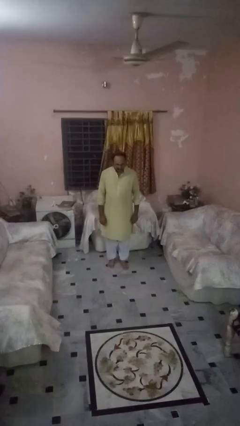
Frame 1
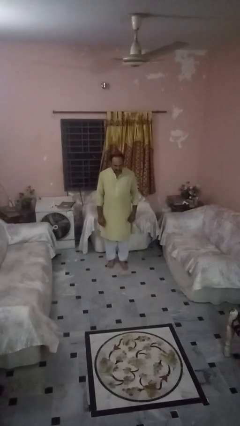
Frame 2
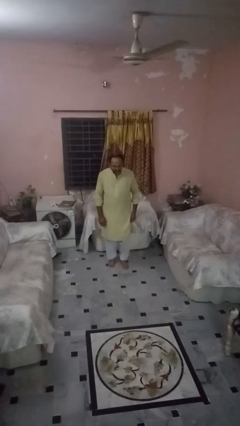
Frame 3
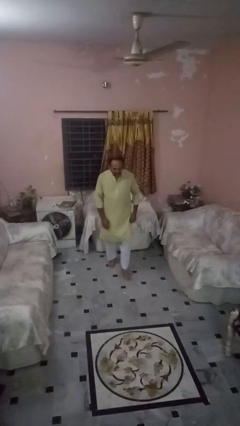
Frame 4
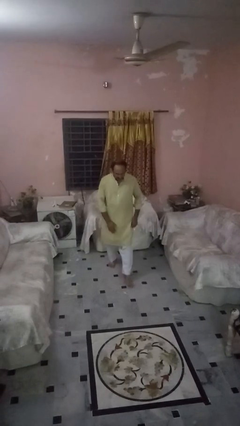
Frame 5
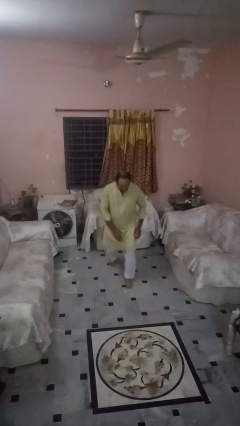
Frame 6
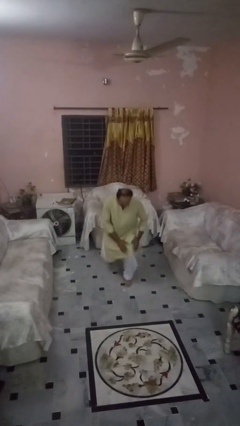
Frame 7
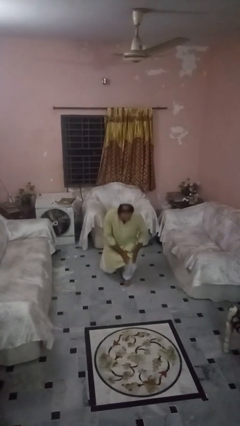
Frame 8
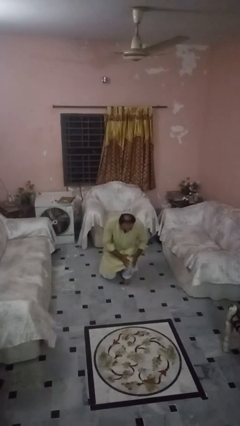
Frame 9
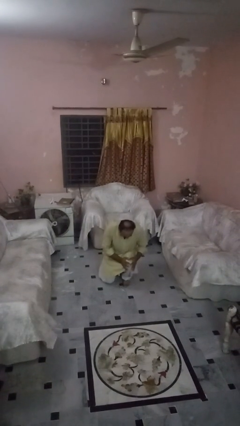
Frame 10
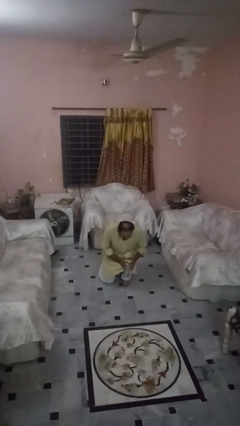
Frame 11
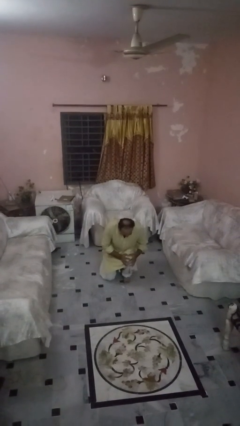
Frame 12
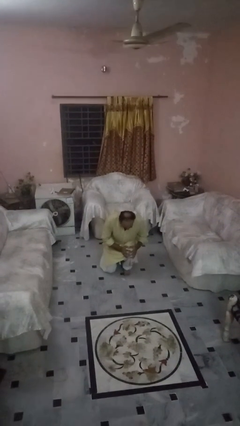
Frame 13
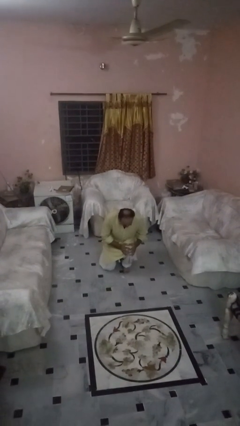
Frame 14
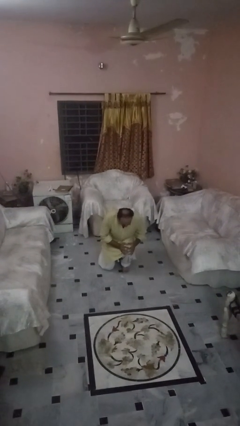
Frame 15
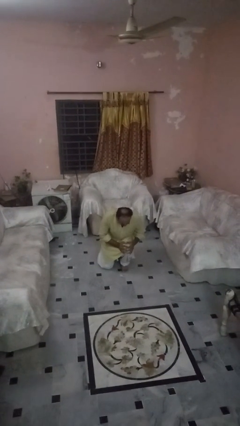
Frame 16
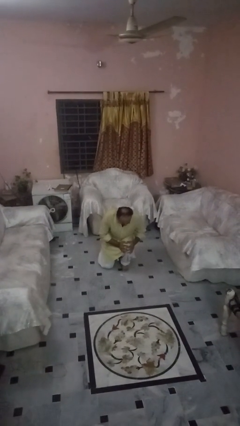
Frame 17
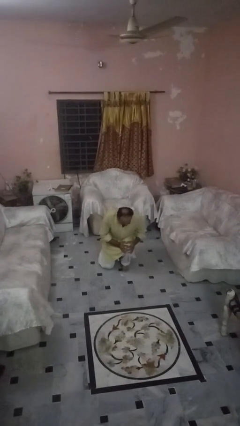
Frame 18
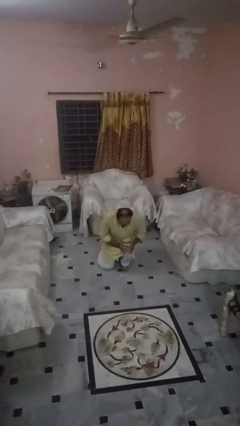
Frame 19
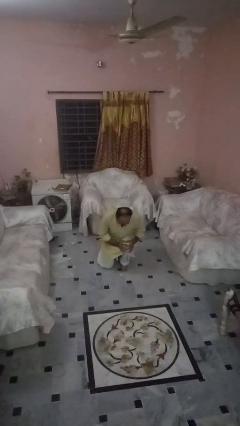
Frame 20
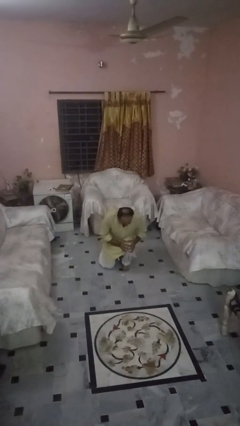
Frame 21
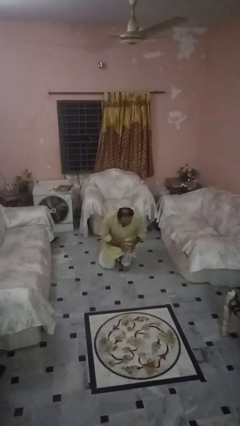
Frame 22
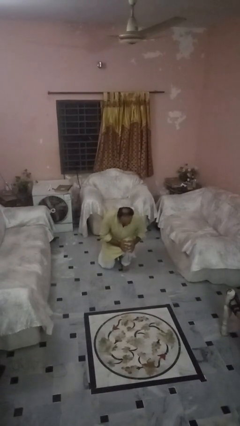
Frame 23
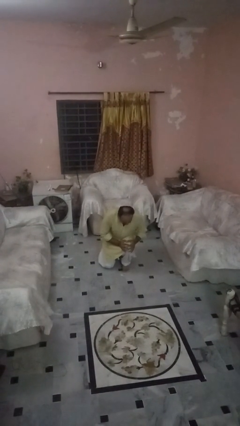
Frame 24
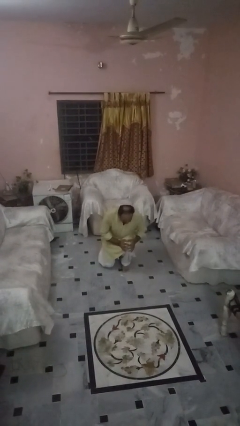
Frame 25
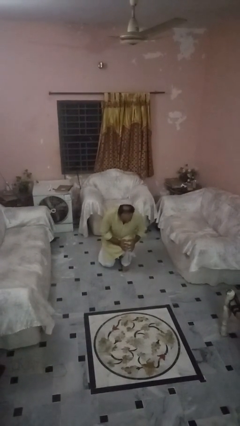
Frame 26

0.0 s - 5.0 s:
person exercises with lunges

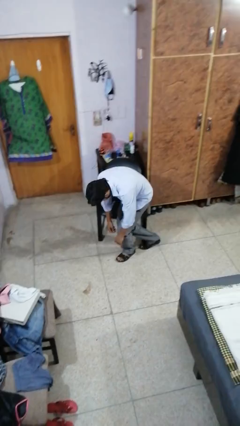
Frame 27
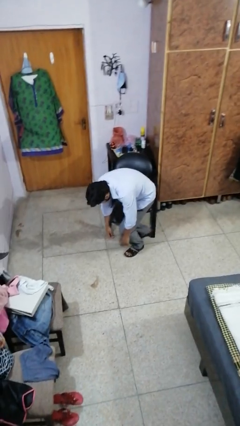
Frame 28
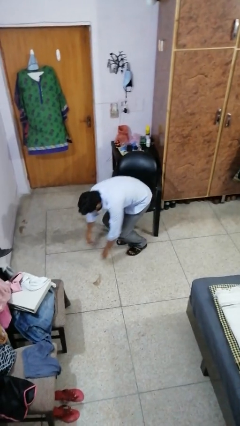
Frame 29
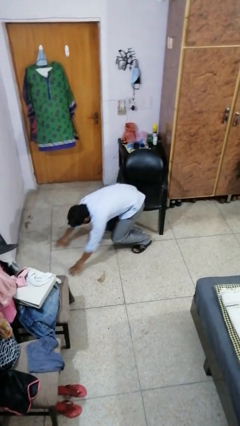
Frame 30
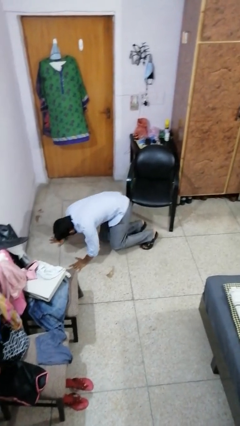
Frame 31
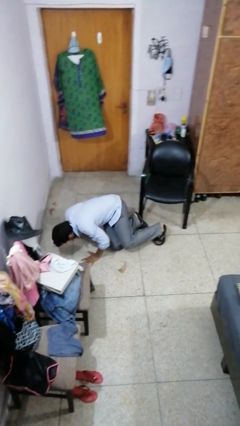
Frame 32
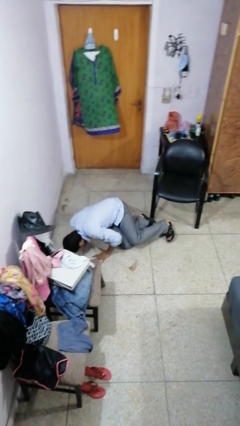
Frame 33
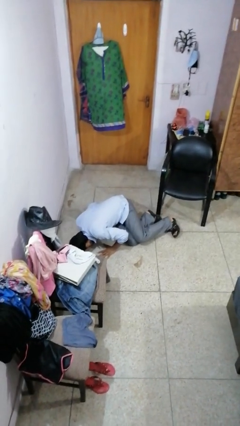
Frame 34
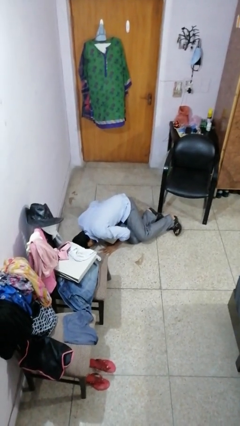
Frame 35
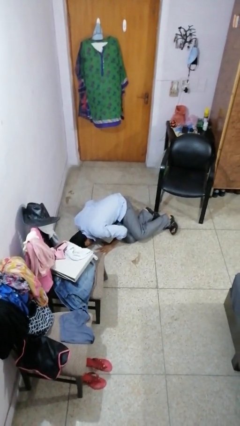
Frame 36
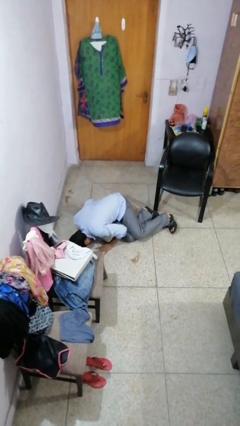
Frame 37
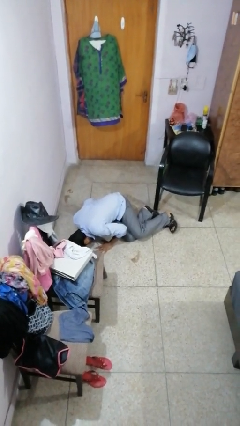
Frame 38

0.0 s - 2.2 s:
person lies down on floor

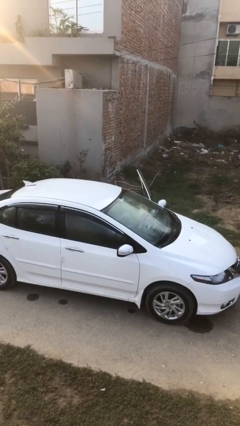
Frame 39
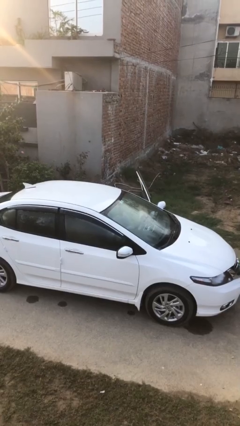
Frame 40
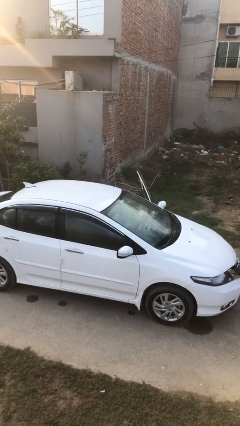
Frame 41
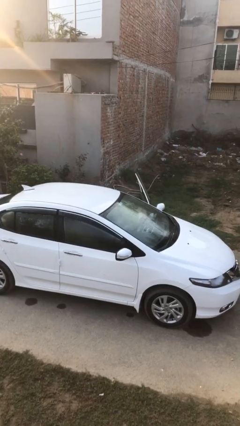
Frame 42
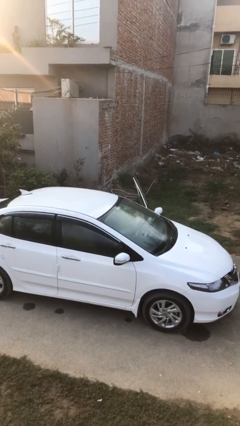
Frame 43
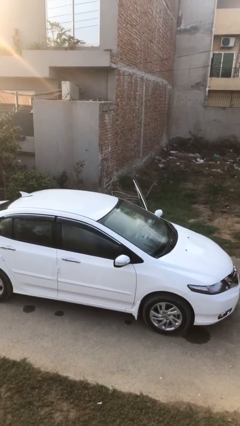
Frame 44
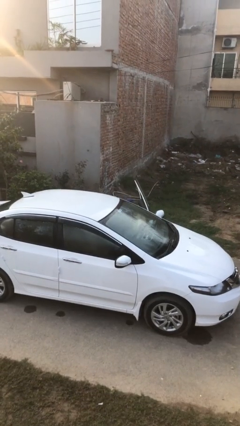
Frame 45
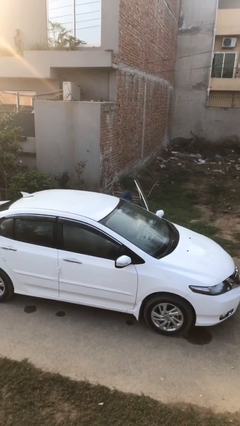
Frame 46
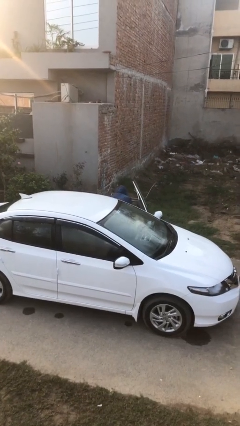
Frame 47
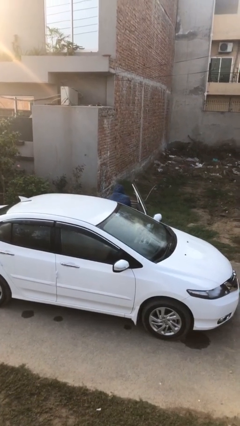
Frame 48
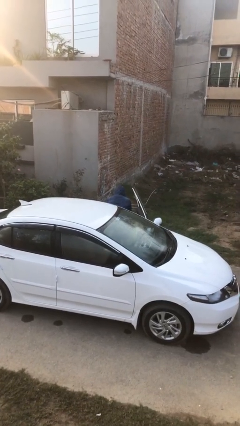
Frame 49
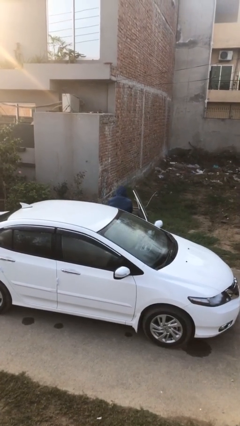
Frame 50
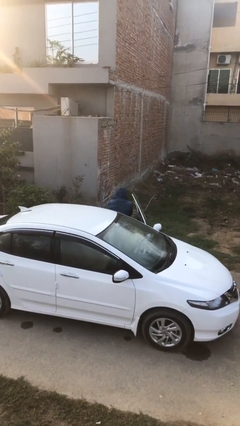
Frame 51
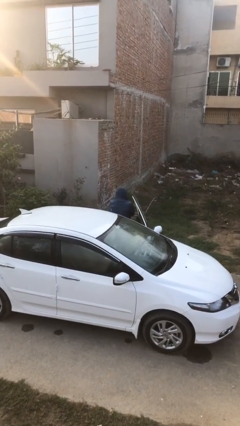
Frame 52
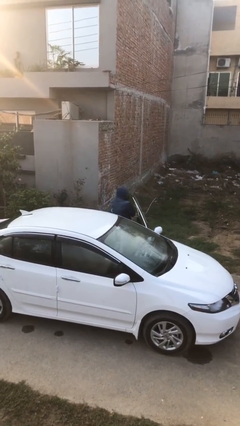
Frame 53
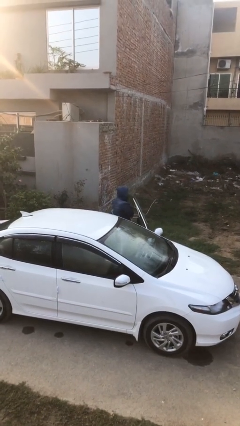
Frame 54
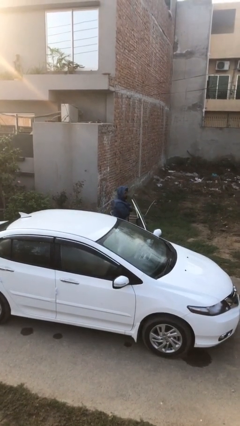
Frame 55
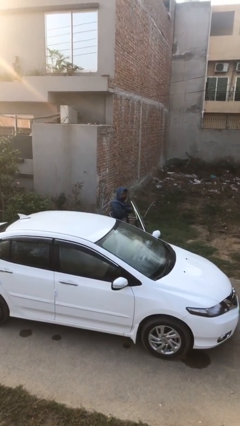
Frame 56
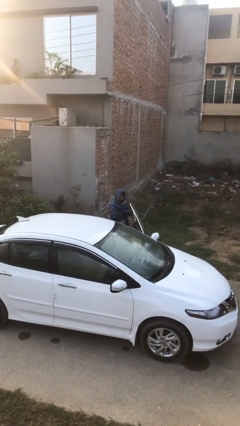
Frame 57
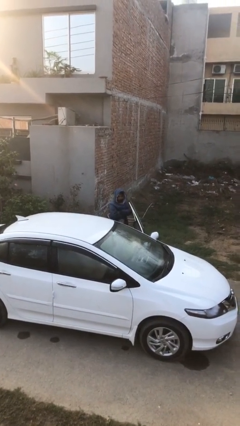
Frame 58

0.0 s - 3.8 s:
person exits car

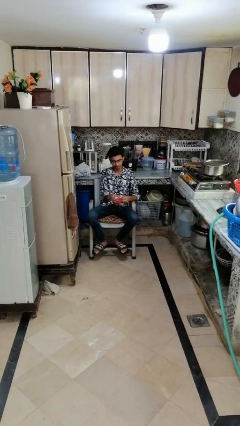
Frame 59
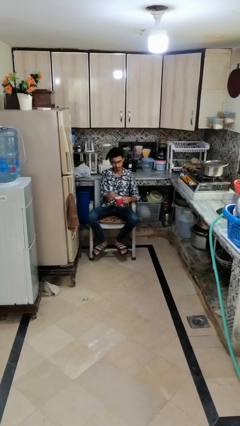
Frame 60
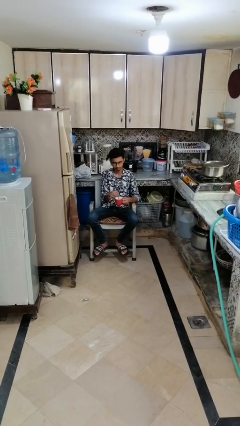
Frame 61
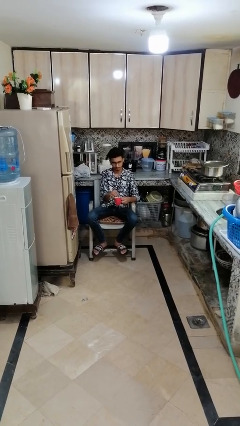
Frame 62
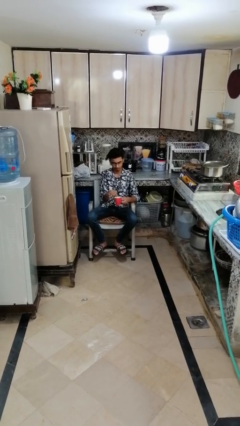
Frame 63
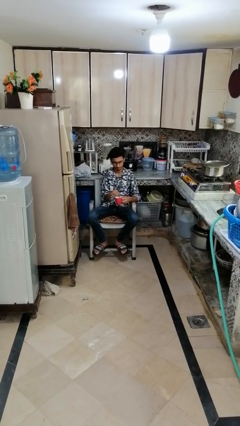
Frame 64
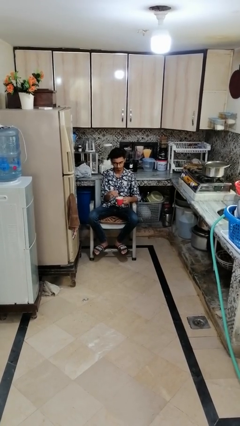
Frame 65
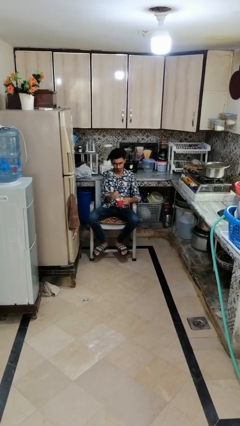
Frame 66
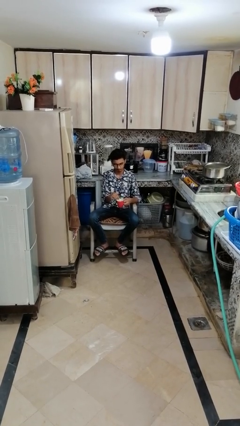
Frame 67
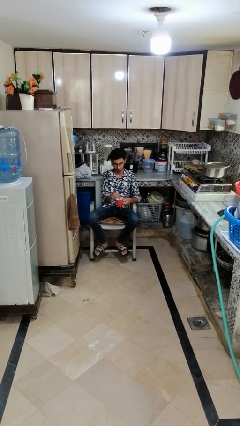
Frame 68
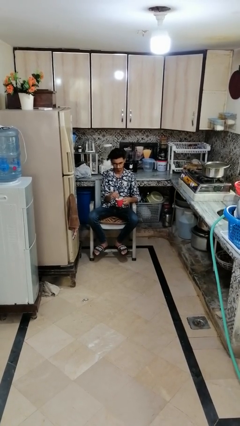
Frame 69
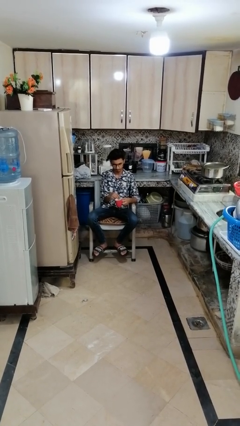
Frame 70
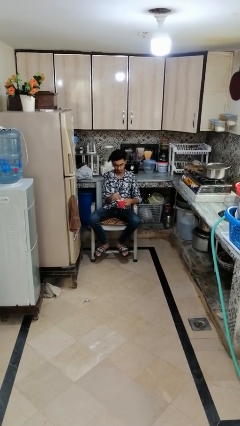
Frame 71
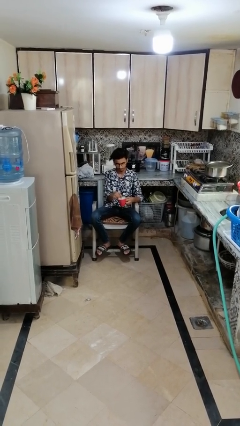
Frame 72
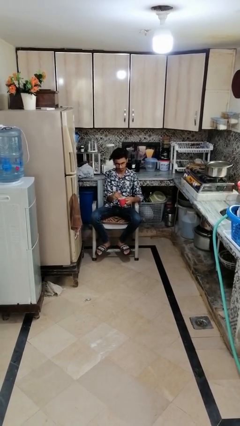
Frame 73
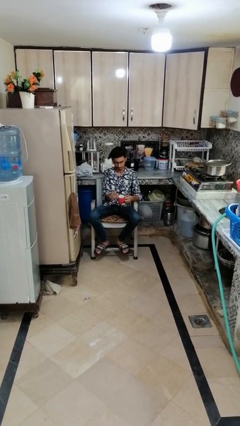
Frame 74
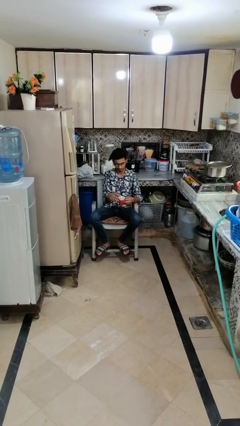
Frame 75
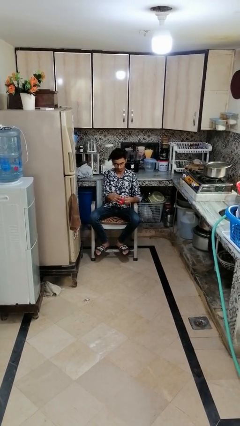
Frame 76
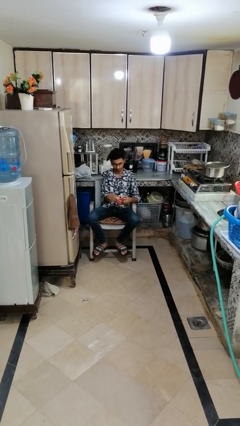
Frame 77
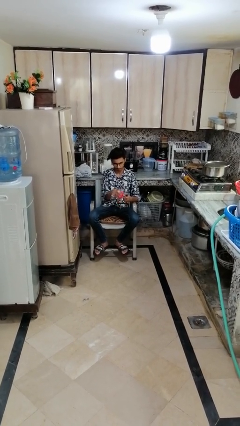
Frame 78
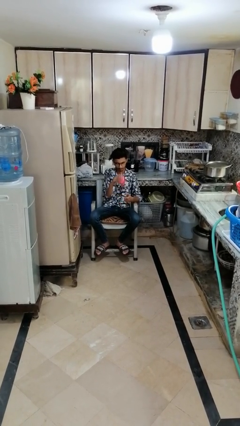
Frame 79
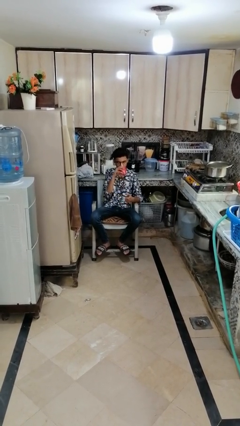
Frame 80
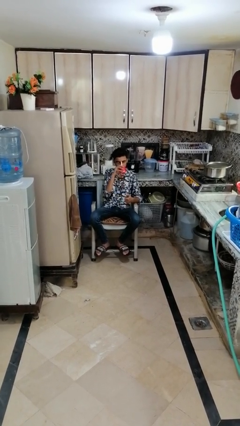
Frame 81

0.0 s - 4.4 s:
person stirs mug

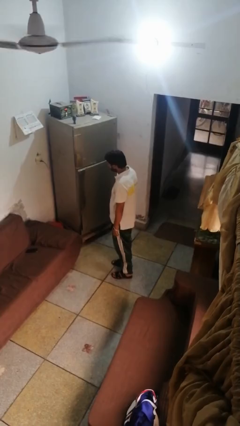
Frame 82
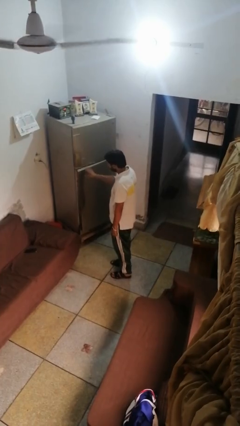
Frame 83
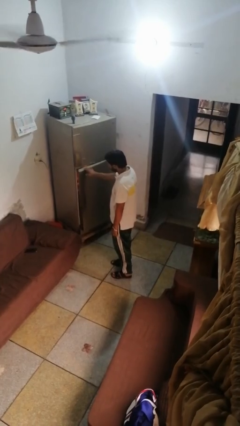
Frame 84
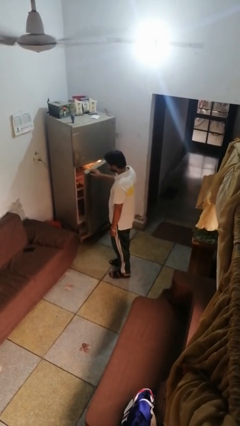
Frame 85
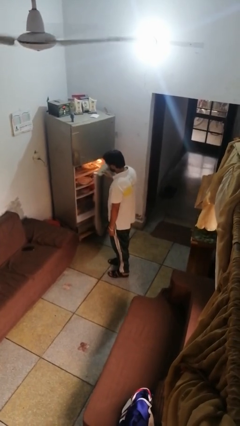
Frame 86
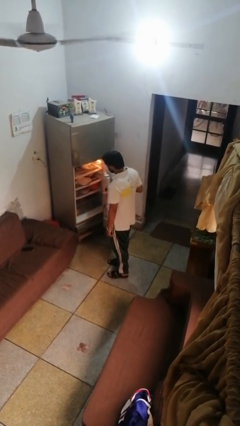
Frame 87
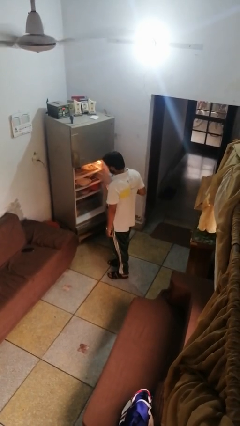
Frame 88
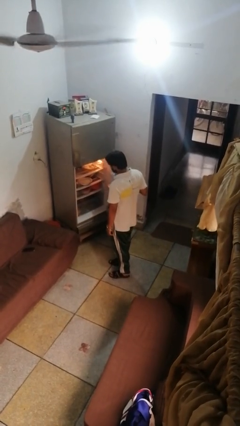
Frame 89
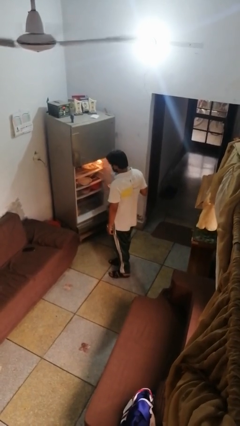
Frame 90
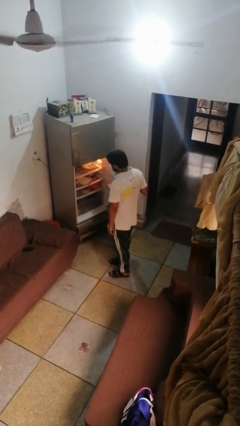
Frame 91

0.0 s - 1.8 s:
person opens refrigerator
